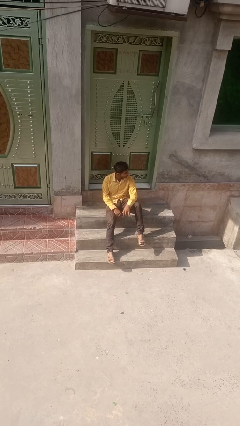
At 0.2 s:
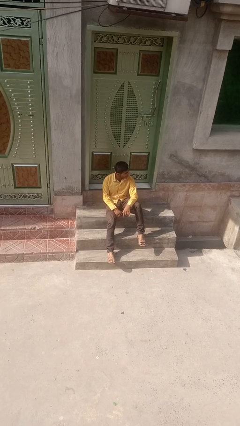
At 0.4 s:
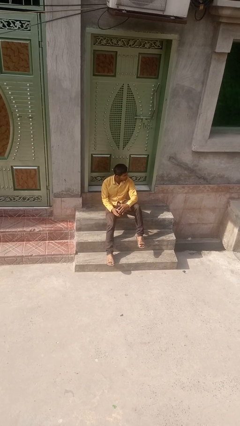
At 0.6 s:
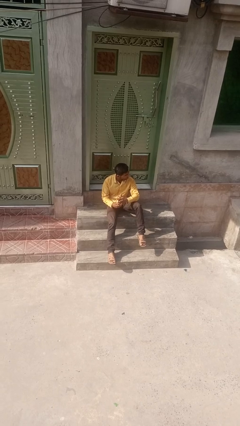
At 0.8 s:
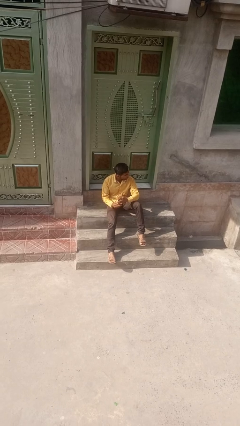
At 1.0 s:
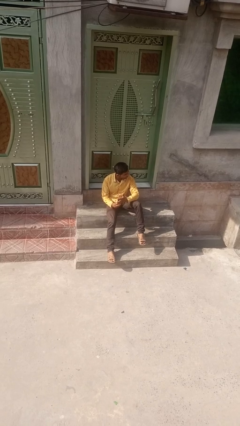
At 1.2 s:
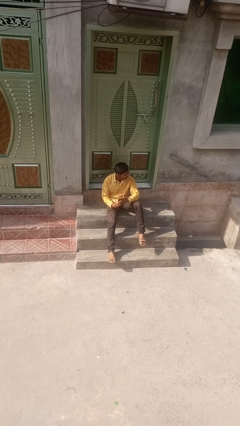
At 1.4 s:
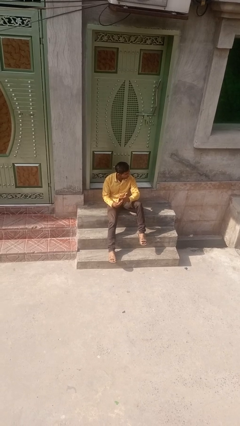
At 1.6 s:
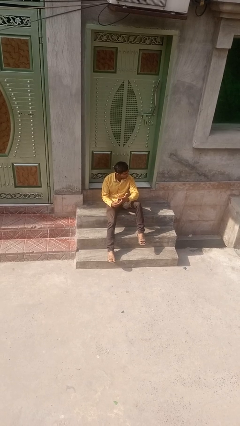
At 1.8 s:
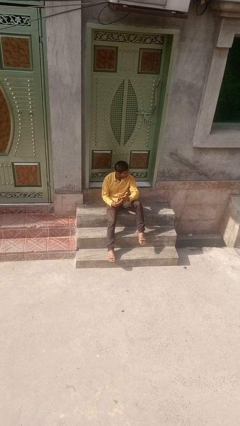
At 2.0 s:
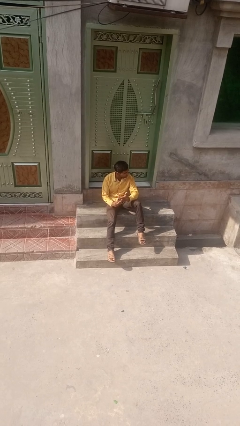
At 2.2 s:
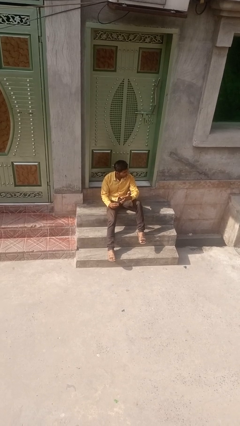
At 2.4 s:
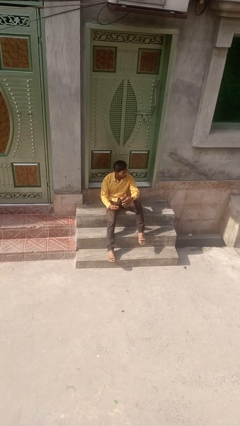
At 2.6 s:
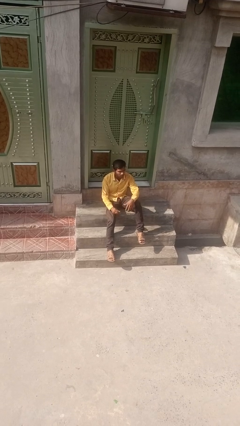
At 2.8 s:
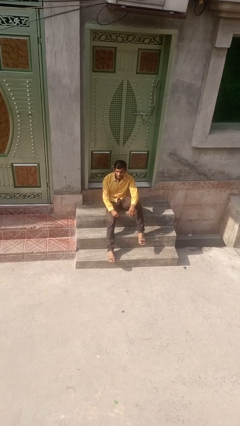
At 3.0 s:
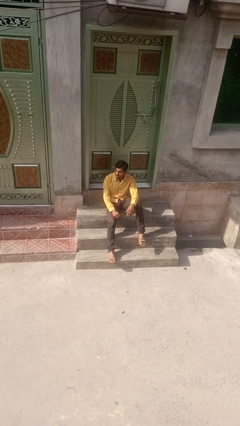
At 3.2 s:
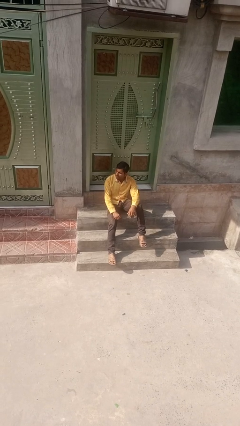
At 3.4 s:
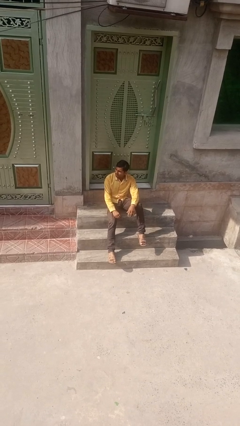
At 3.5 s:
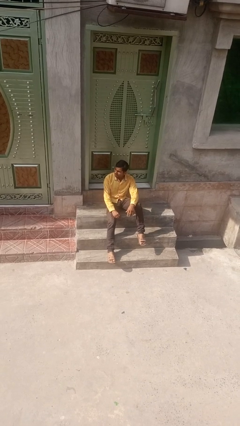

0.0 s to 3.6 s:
person takes off ring

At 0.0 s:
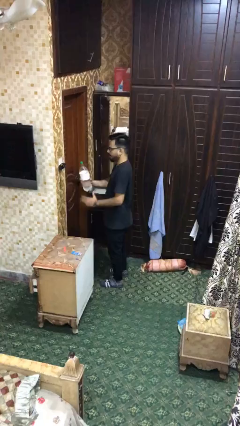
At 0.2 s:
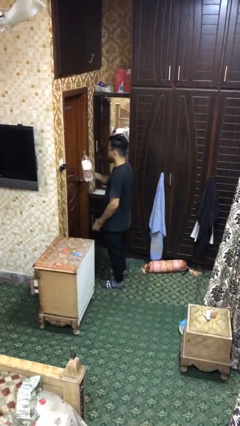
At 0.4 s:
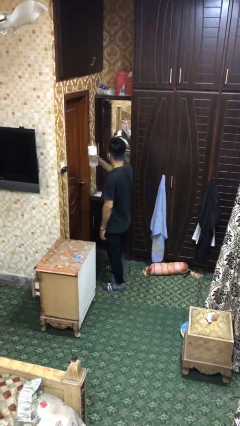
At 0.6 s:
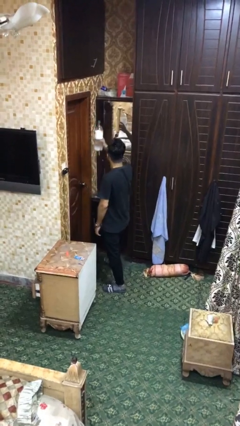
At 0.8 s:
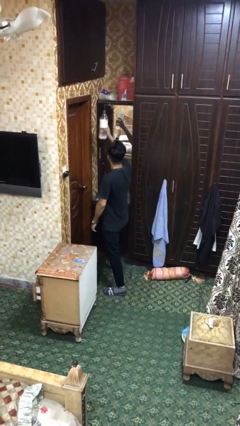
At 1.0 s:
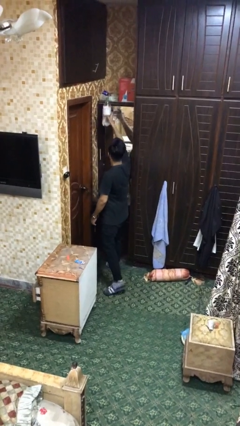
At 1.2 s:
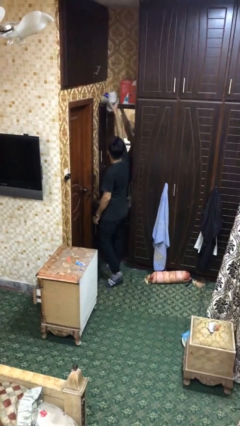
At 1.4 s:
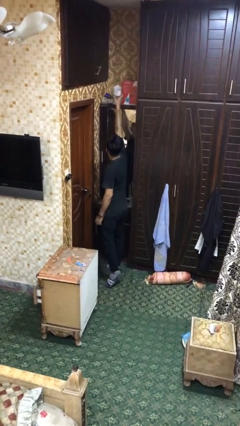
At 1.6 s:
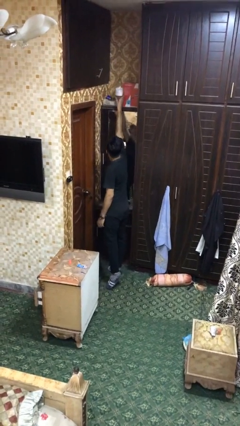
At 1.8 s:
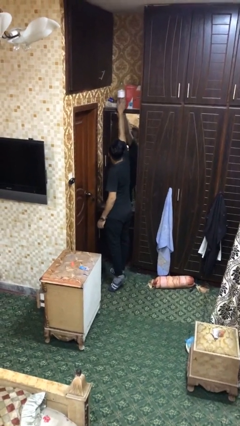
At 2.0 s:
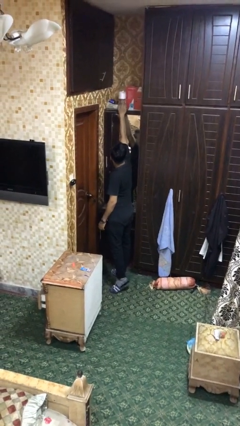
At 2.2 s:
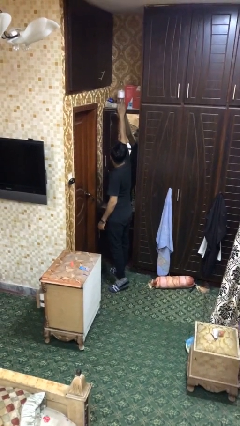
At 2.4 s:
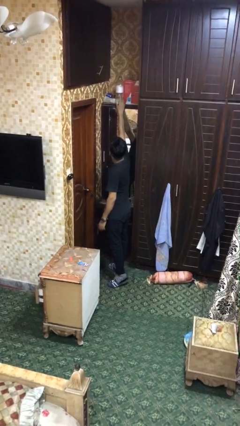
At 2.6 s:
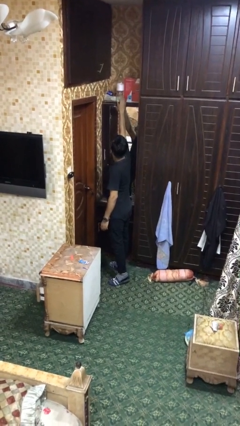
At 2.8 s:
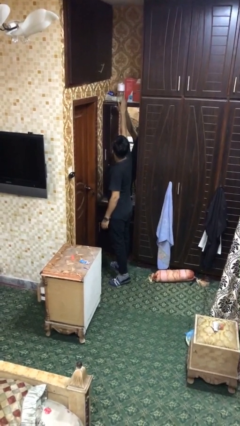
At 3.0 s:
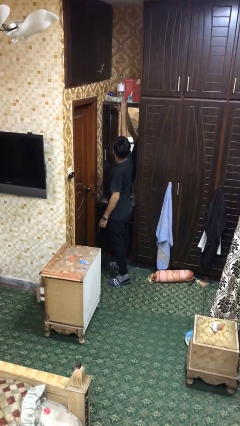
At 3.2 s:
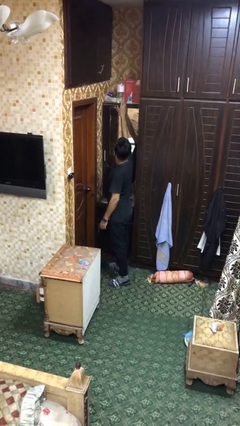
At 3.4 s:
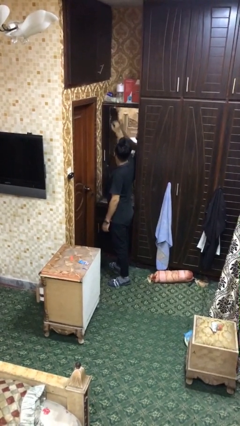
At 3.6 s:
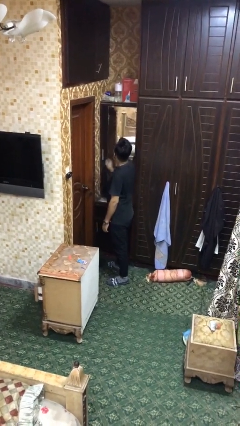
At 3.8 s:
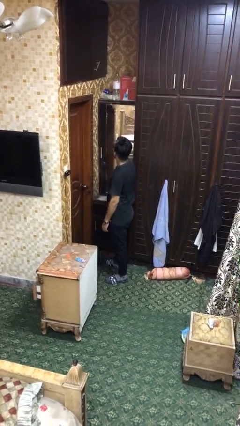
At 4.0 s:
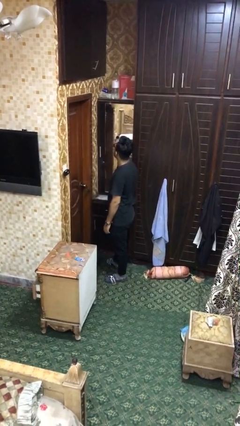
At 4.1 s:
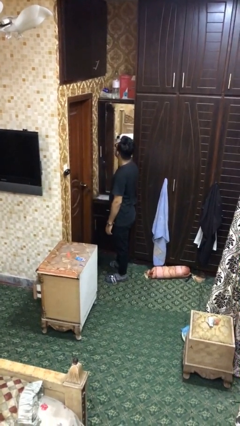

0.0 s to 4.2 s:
person puts down object on shelf

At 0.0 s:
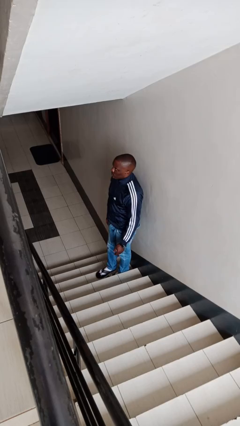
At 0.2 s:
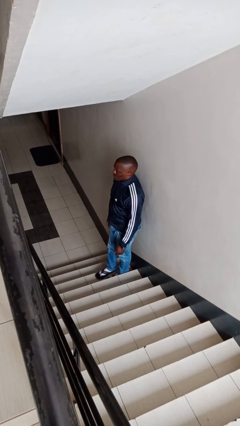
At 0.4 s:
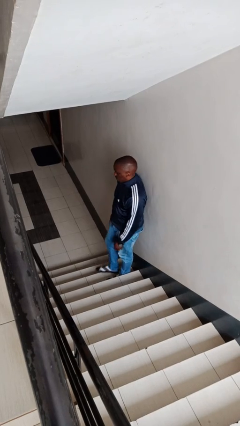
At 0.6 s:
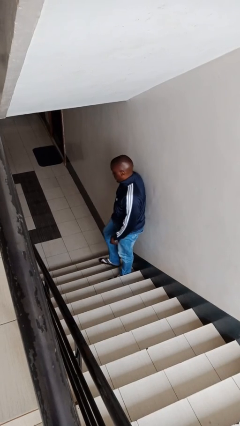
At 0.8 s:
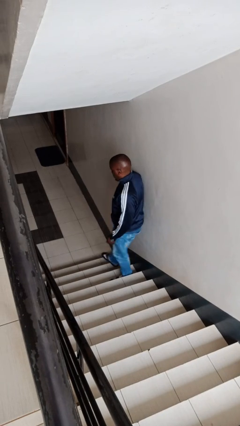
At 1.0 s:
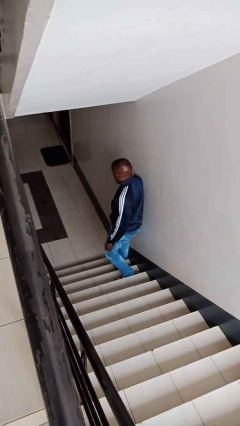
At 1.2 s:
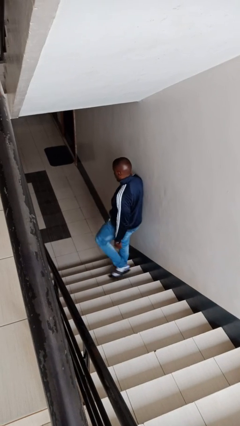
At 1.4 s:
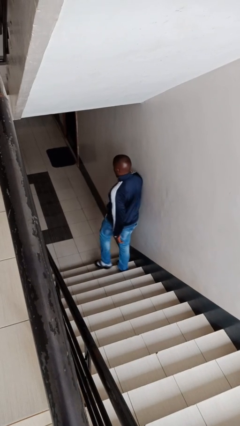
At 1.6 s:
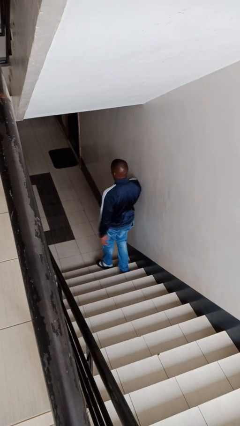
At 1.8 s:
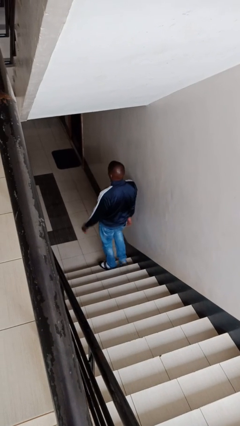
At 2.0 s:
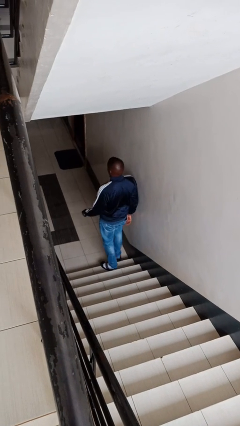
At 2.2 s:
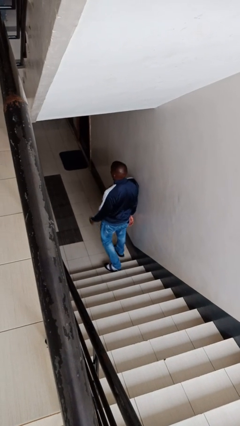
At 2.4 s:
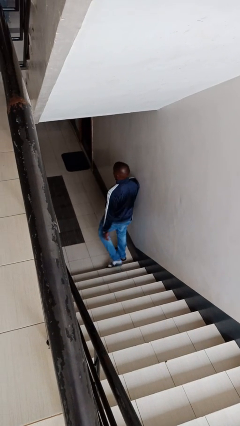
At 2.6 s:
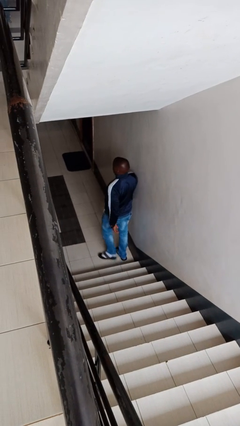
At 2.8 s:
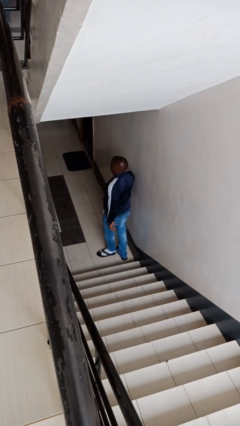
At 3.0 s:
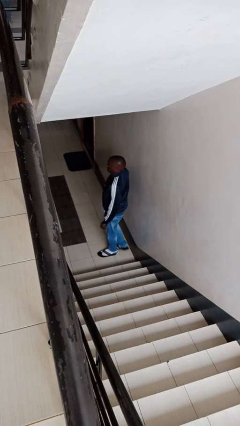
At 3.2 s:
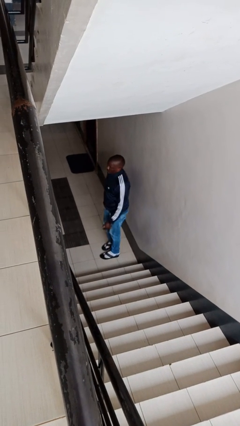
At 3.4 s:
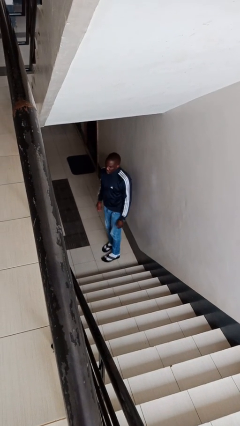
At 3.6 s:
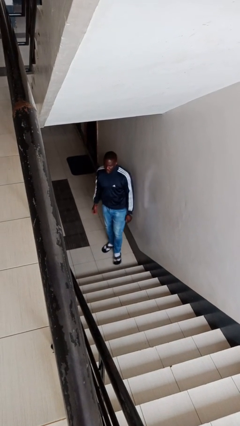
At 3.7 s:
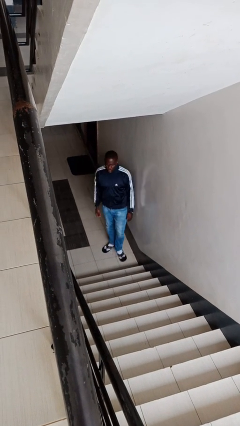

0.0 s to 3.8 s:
person climbs down stairs

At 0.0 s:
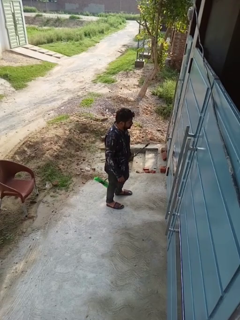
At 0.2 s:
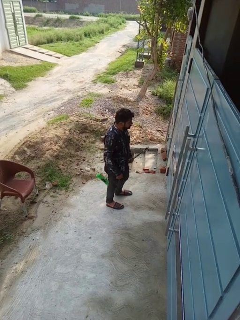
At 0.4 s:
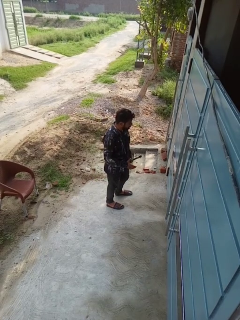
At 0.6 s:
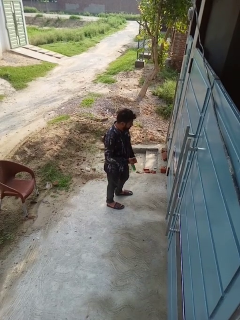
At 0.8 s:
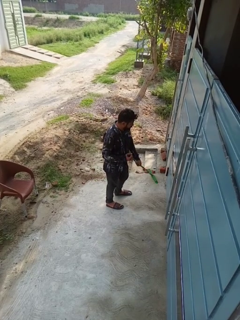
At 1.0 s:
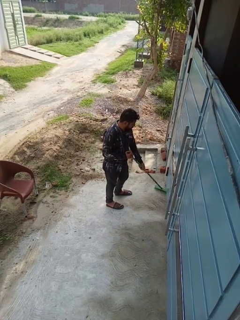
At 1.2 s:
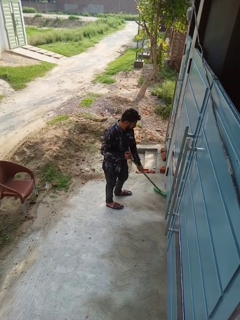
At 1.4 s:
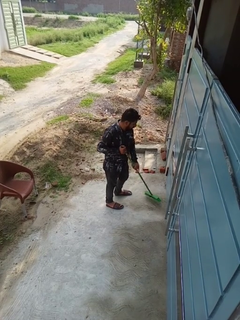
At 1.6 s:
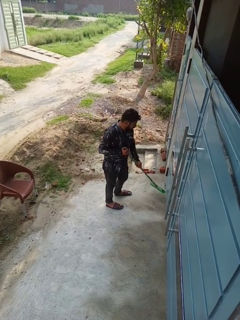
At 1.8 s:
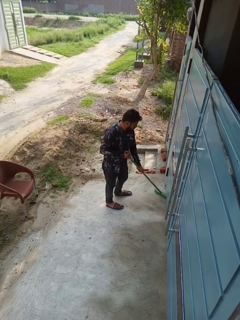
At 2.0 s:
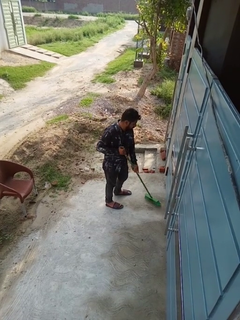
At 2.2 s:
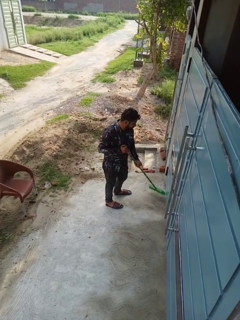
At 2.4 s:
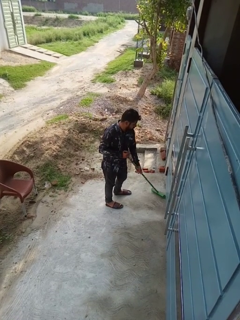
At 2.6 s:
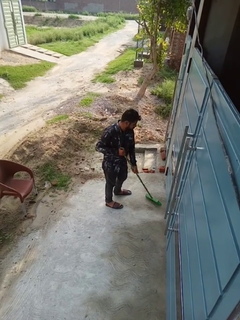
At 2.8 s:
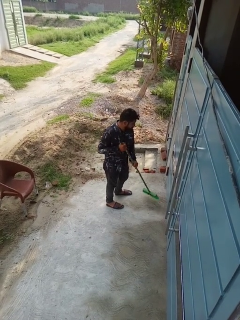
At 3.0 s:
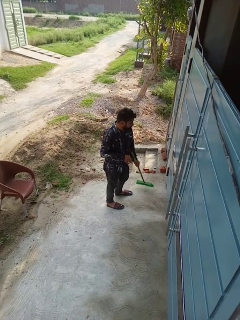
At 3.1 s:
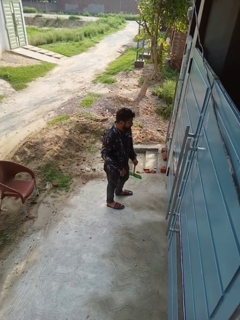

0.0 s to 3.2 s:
person sweeps floor

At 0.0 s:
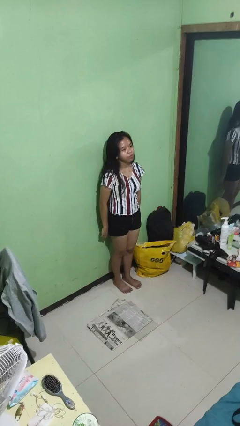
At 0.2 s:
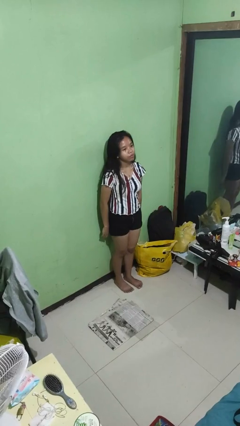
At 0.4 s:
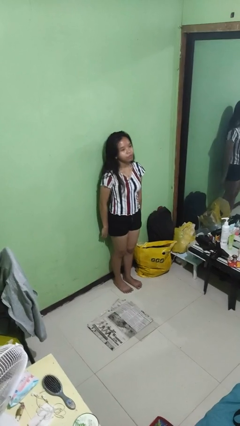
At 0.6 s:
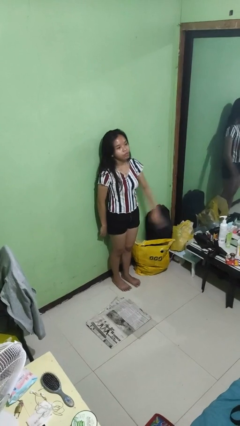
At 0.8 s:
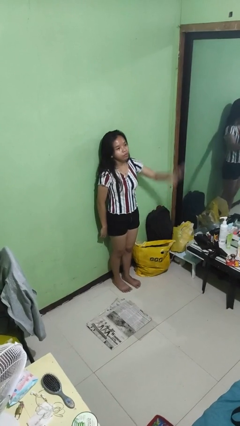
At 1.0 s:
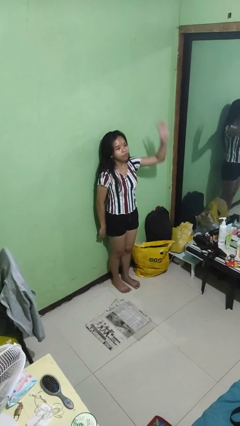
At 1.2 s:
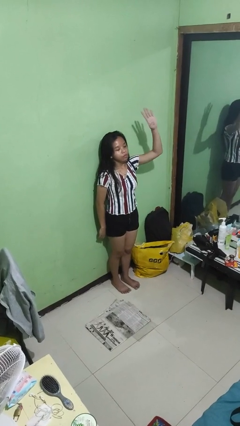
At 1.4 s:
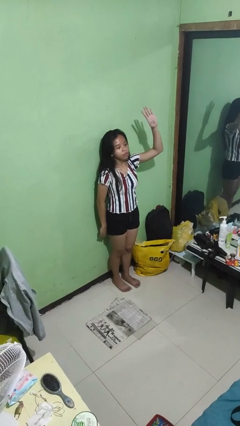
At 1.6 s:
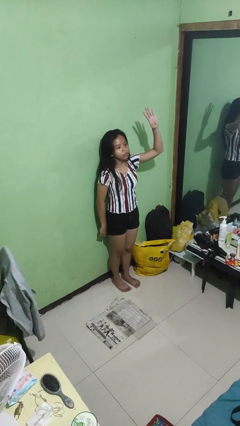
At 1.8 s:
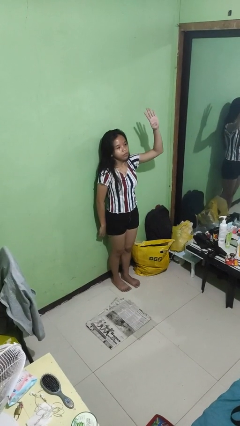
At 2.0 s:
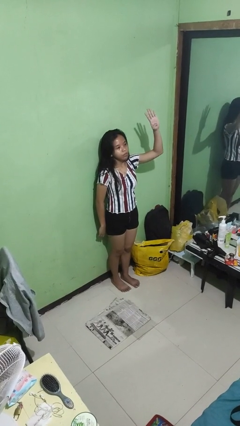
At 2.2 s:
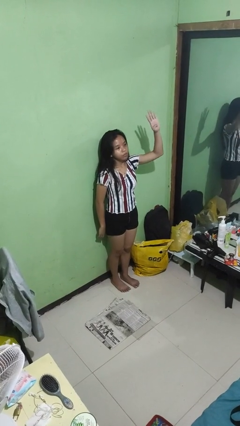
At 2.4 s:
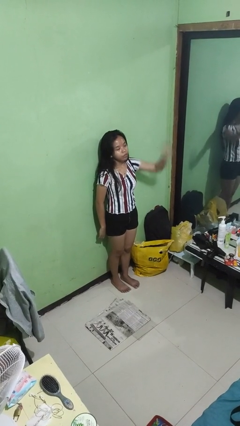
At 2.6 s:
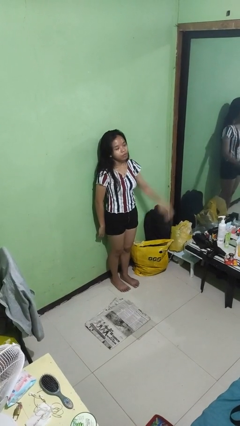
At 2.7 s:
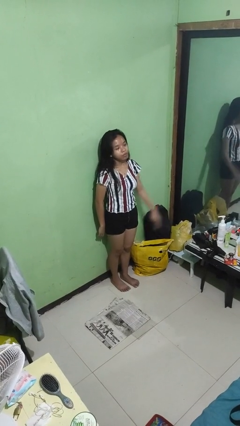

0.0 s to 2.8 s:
person gestures number four

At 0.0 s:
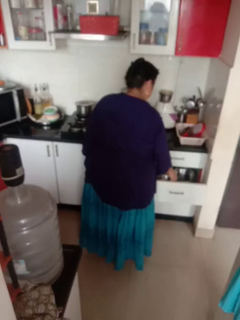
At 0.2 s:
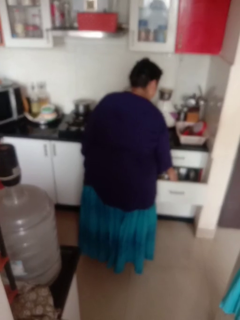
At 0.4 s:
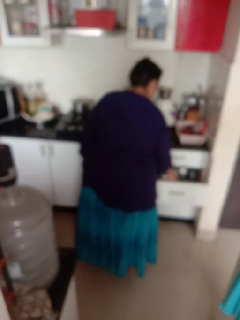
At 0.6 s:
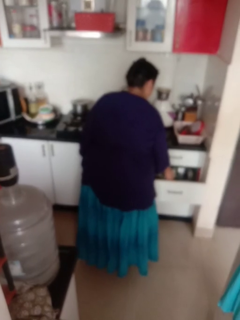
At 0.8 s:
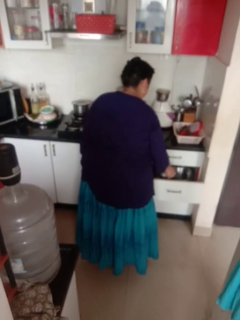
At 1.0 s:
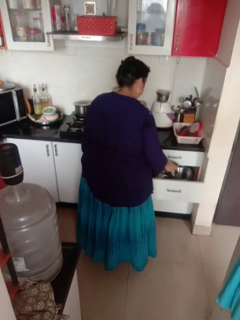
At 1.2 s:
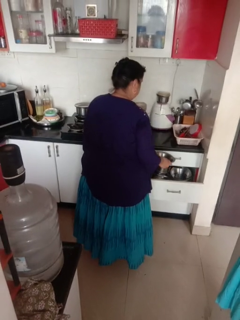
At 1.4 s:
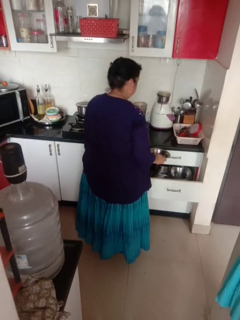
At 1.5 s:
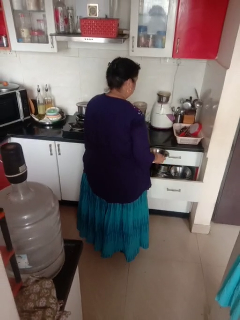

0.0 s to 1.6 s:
person takes object from kitchen drawer
